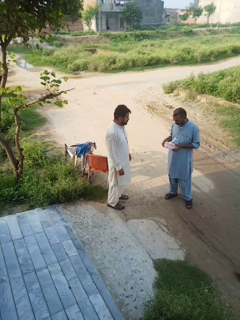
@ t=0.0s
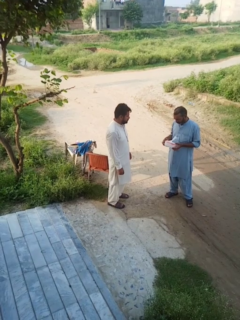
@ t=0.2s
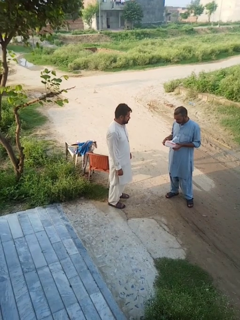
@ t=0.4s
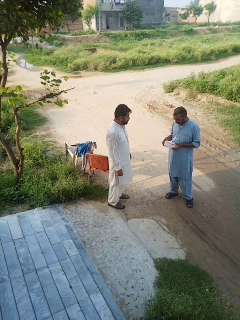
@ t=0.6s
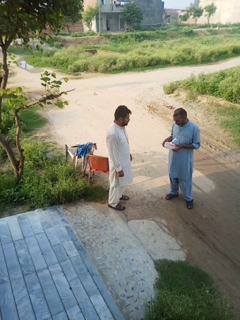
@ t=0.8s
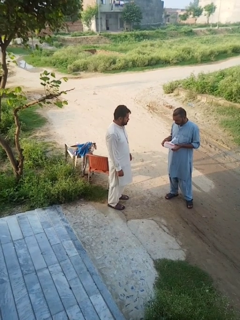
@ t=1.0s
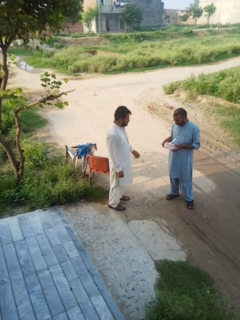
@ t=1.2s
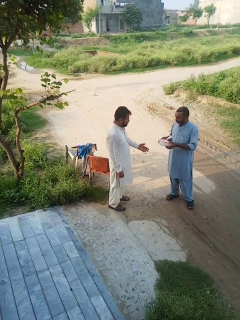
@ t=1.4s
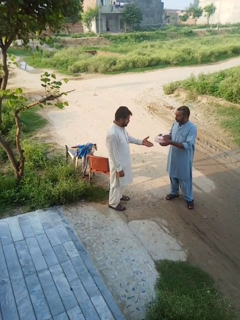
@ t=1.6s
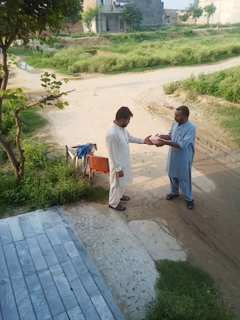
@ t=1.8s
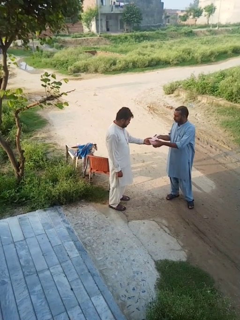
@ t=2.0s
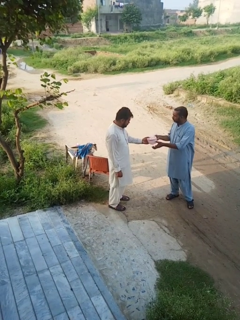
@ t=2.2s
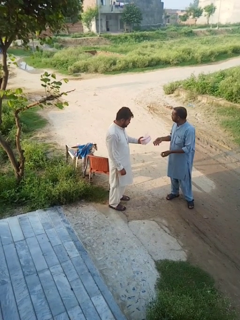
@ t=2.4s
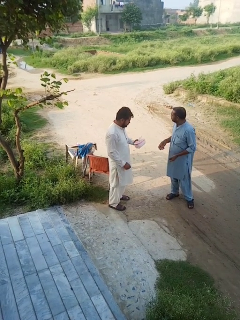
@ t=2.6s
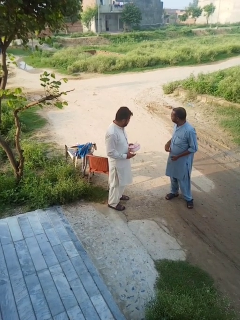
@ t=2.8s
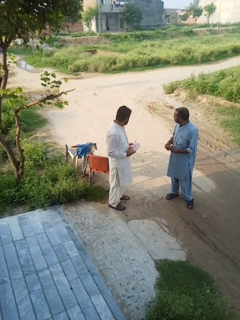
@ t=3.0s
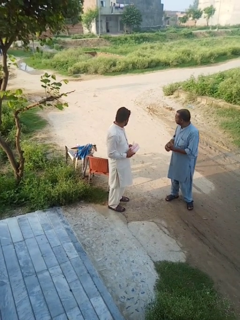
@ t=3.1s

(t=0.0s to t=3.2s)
person transfers object to person

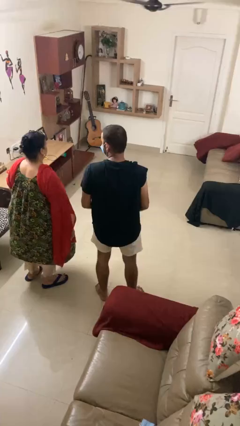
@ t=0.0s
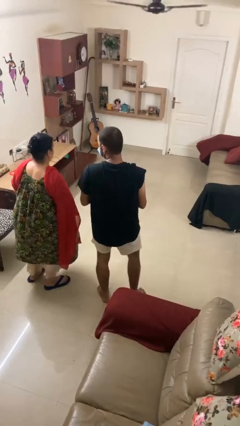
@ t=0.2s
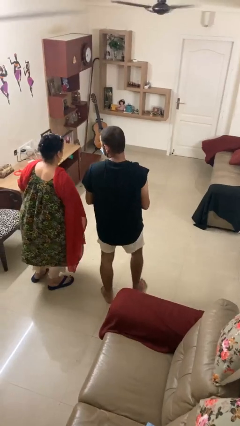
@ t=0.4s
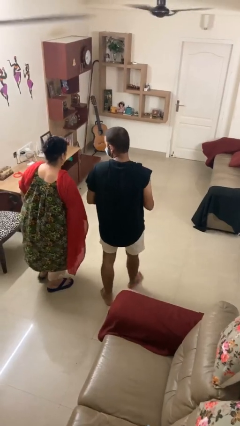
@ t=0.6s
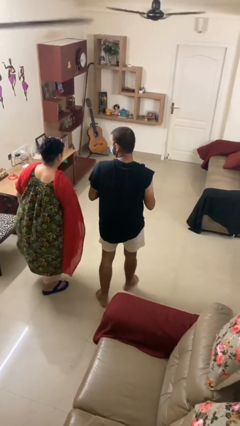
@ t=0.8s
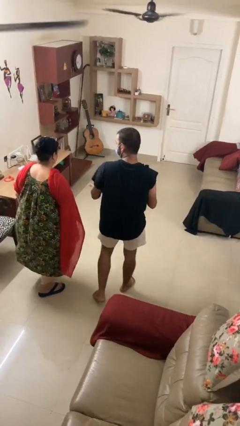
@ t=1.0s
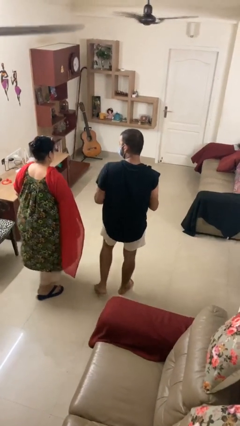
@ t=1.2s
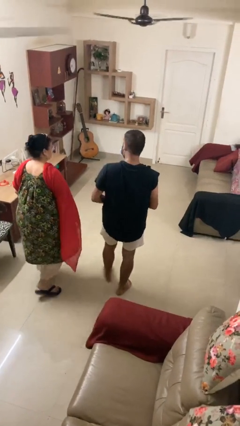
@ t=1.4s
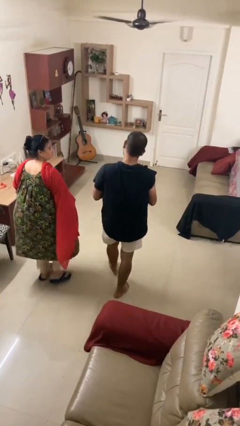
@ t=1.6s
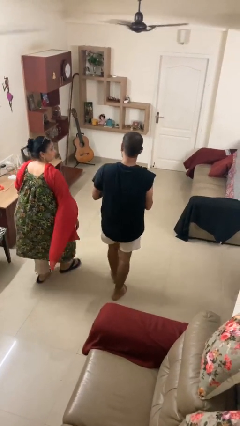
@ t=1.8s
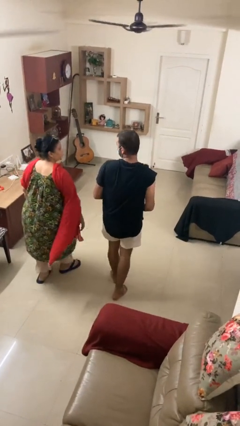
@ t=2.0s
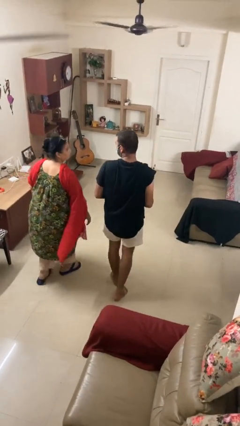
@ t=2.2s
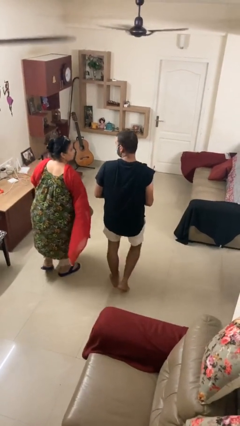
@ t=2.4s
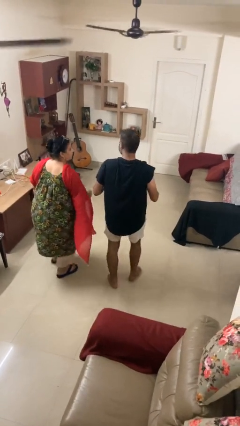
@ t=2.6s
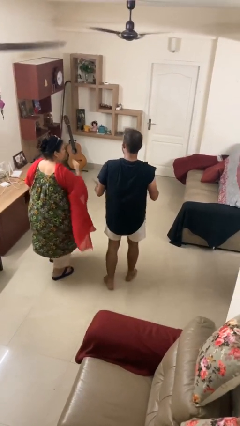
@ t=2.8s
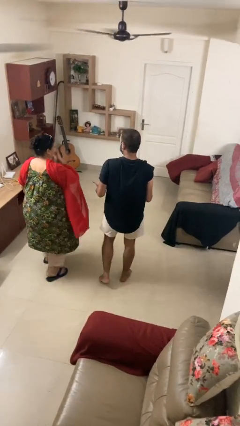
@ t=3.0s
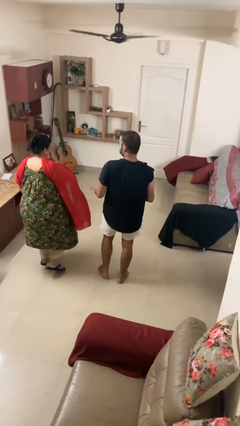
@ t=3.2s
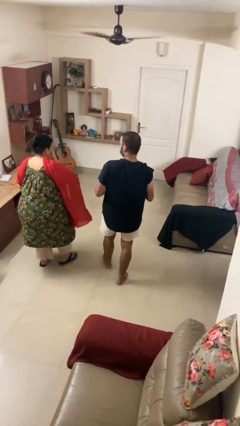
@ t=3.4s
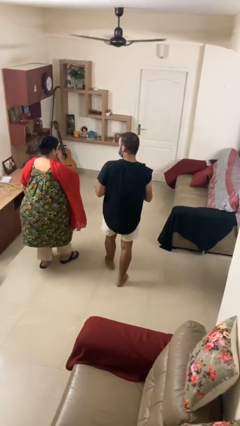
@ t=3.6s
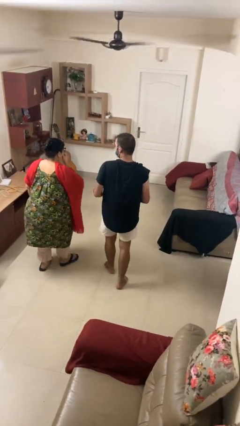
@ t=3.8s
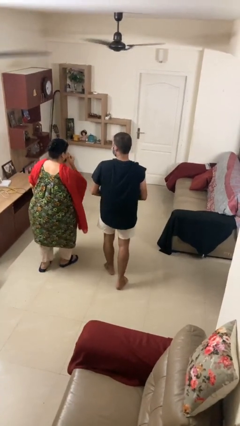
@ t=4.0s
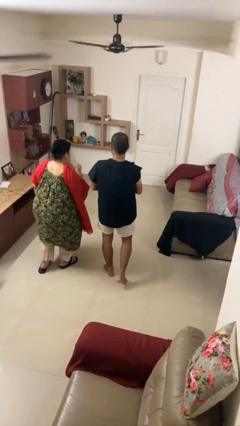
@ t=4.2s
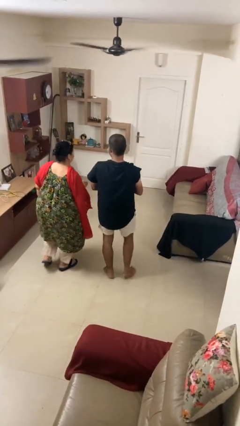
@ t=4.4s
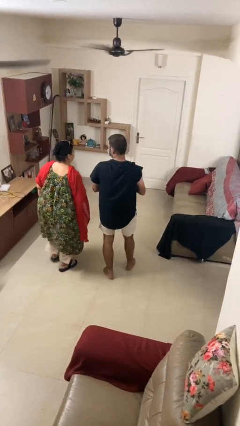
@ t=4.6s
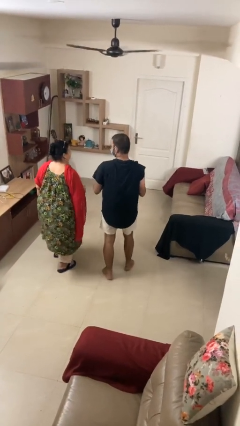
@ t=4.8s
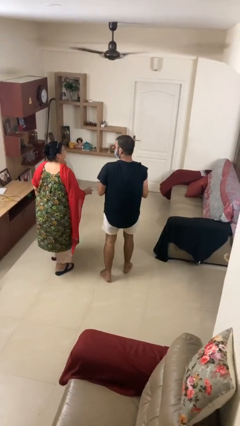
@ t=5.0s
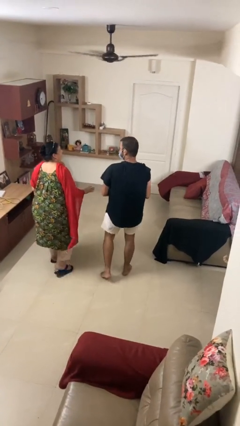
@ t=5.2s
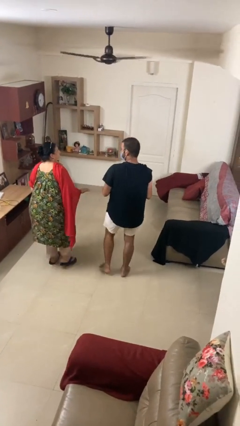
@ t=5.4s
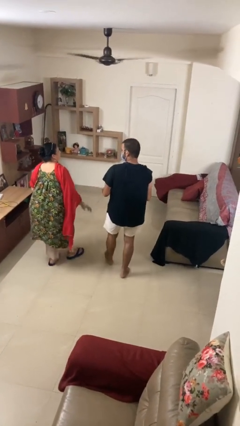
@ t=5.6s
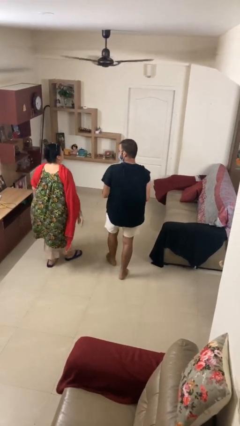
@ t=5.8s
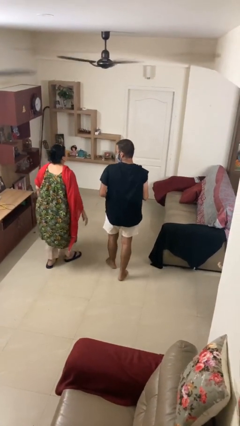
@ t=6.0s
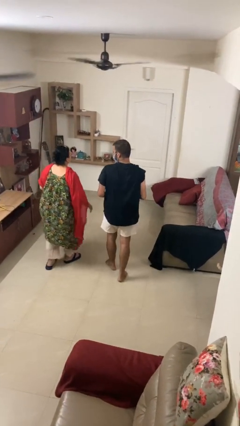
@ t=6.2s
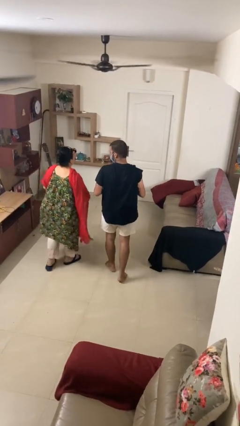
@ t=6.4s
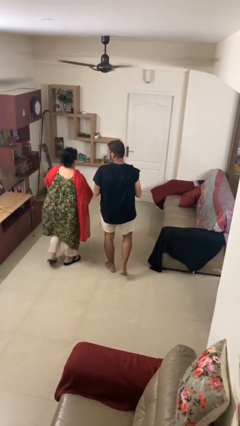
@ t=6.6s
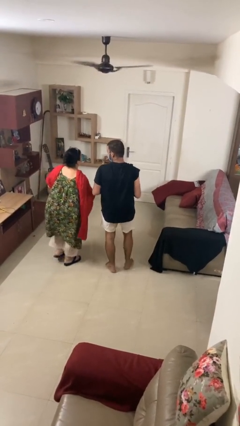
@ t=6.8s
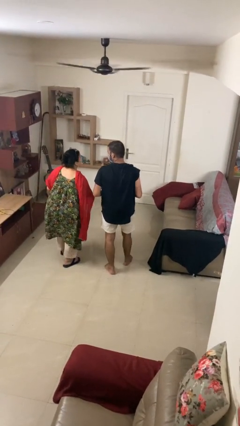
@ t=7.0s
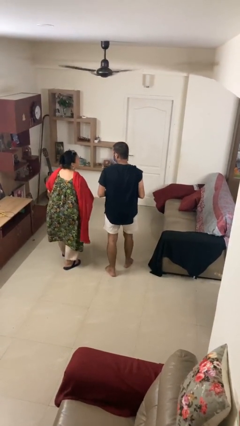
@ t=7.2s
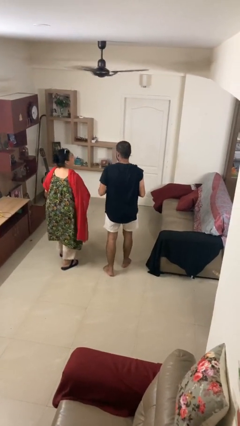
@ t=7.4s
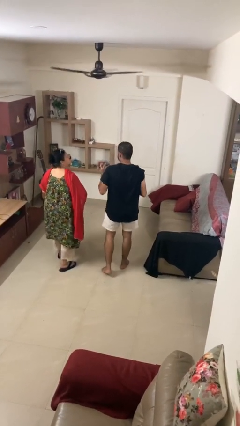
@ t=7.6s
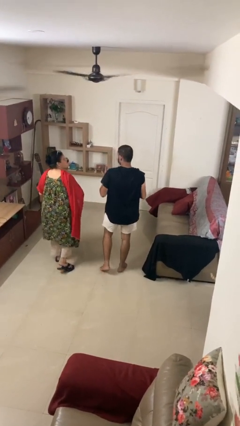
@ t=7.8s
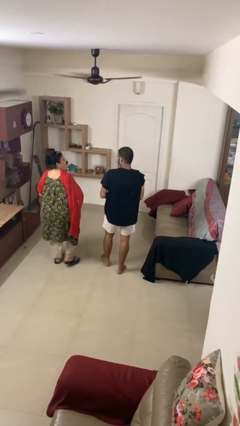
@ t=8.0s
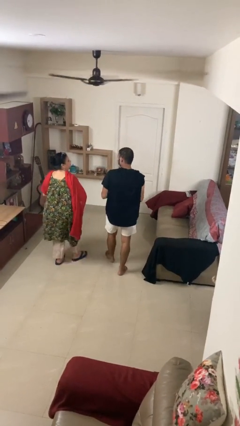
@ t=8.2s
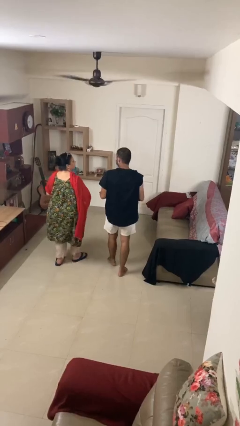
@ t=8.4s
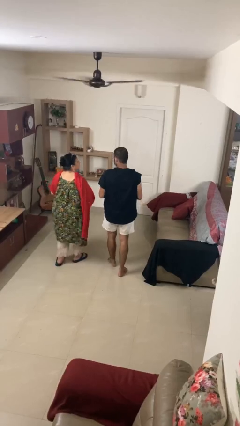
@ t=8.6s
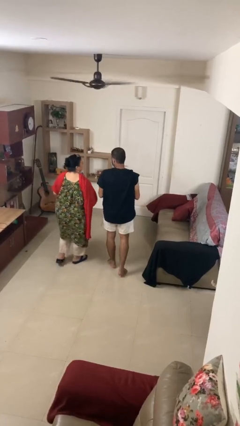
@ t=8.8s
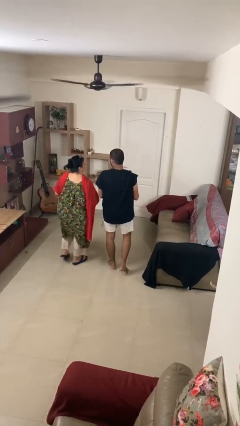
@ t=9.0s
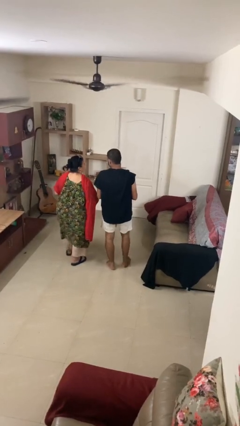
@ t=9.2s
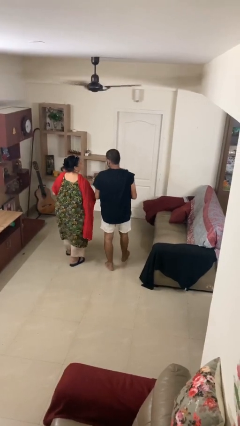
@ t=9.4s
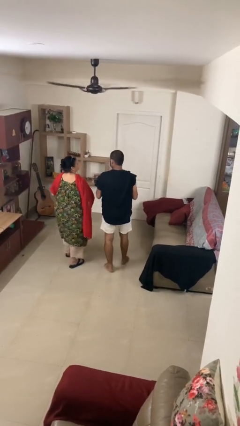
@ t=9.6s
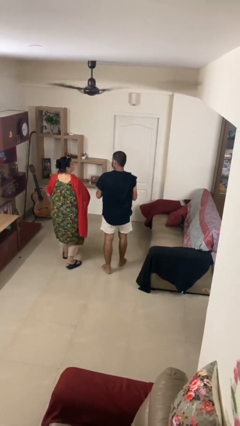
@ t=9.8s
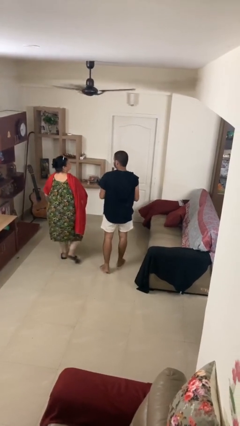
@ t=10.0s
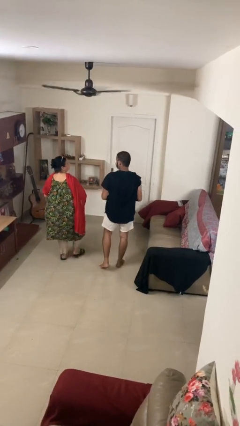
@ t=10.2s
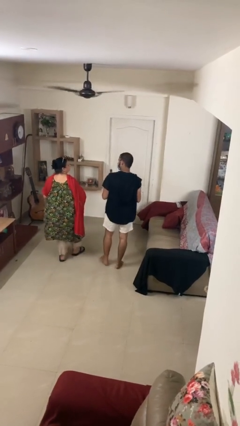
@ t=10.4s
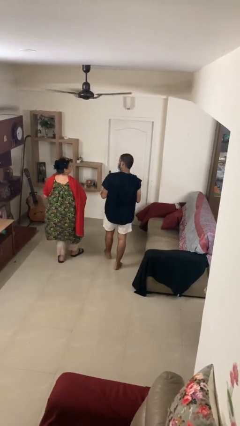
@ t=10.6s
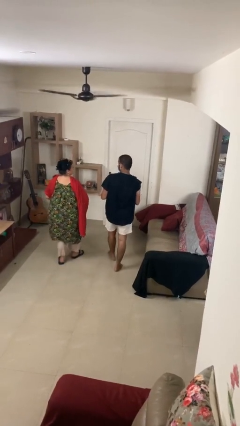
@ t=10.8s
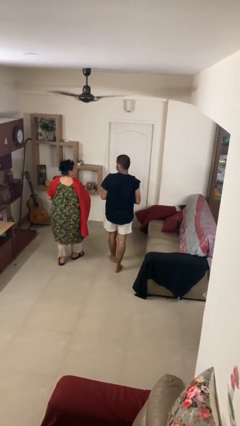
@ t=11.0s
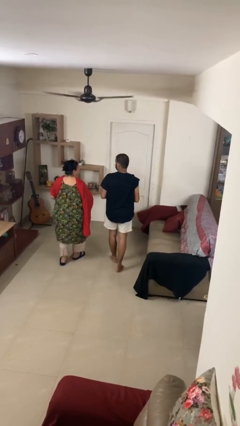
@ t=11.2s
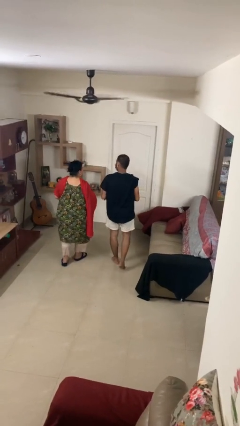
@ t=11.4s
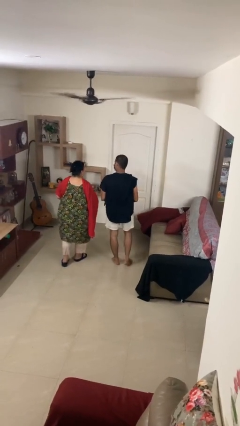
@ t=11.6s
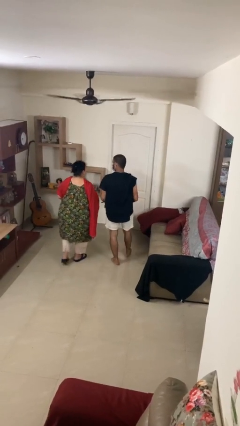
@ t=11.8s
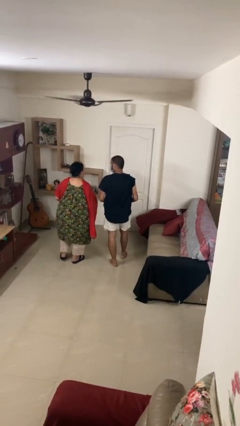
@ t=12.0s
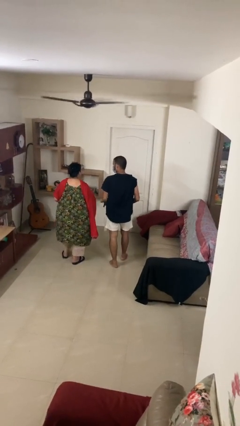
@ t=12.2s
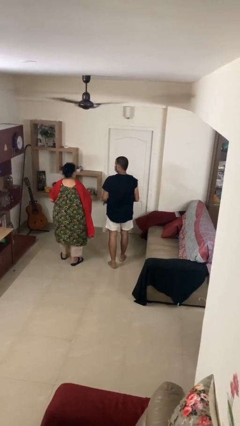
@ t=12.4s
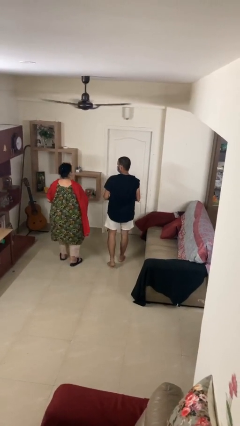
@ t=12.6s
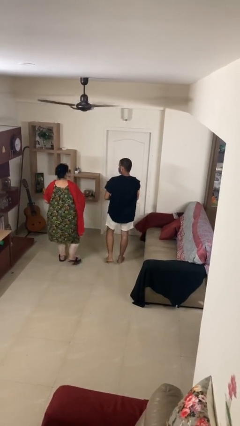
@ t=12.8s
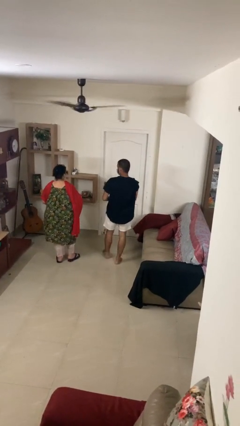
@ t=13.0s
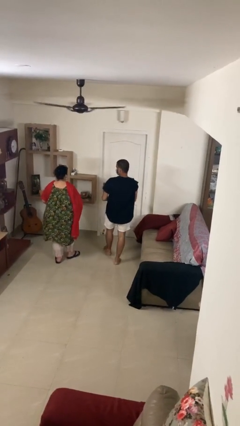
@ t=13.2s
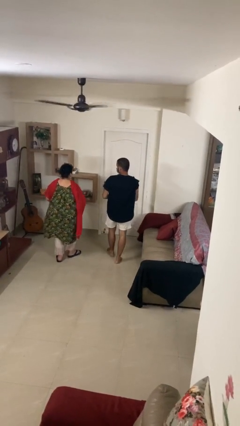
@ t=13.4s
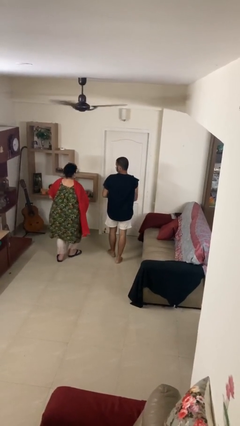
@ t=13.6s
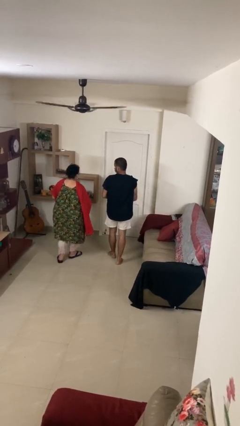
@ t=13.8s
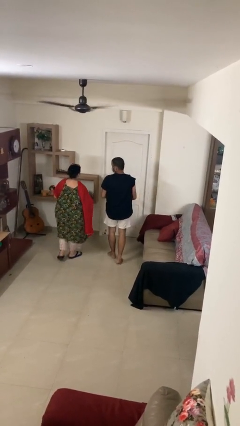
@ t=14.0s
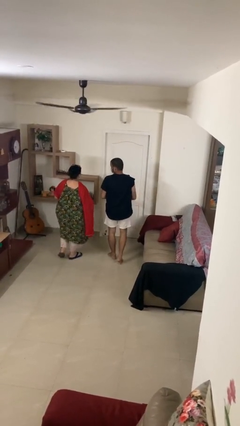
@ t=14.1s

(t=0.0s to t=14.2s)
person talks to person

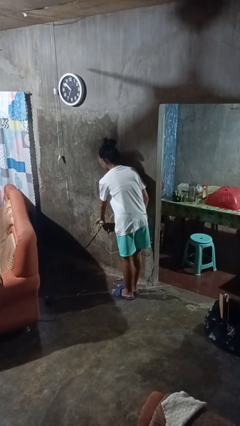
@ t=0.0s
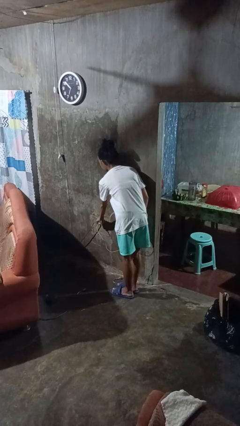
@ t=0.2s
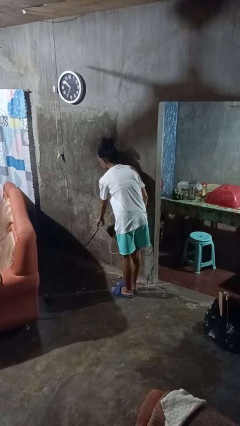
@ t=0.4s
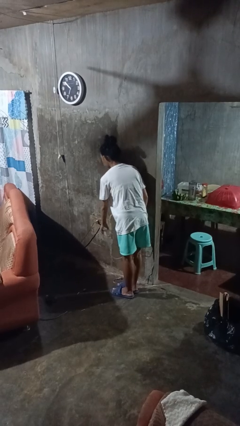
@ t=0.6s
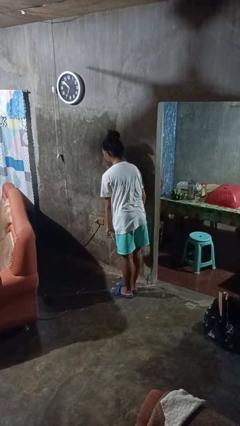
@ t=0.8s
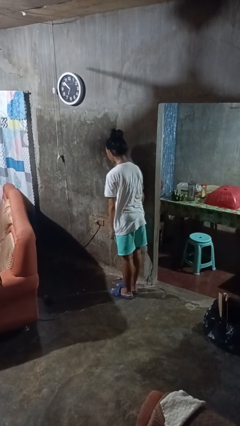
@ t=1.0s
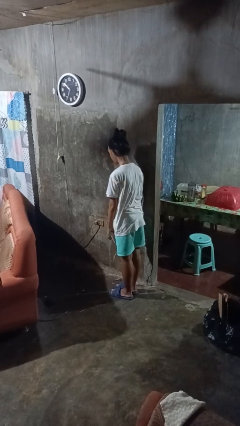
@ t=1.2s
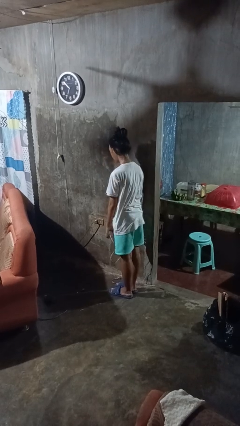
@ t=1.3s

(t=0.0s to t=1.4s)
person unplugs from electrical socket
